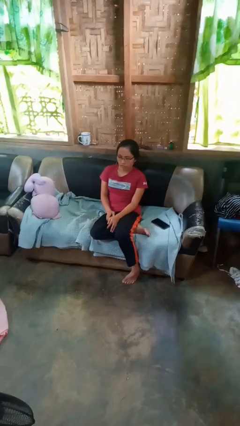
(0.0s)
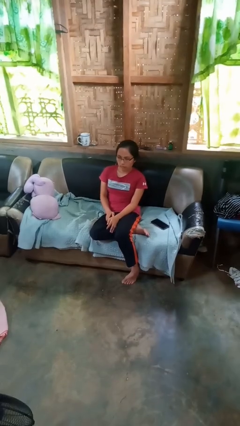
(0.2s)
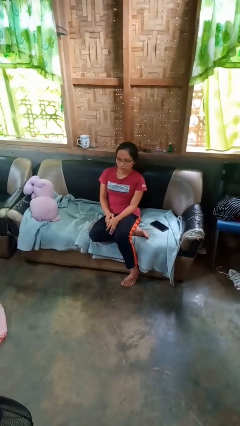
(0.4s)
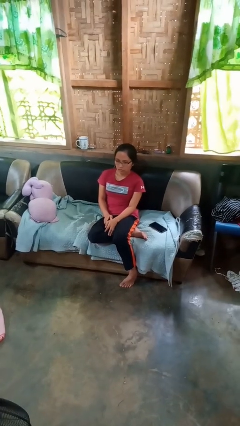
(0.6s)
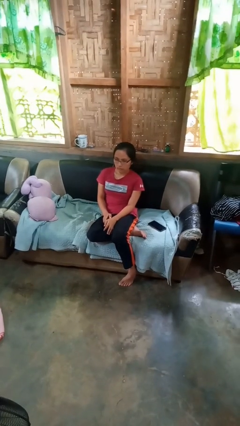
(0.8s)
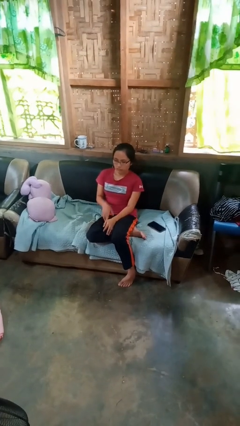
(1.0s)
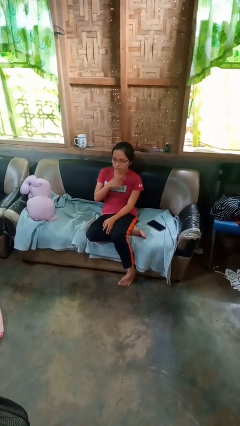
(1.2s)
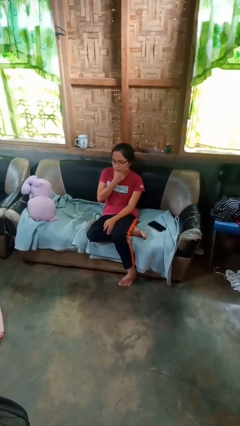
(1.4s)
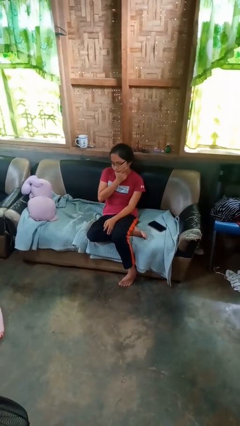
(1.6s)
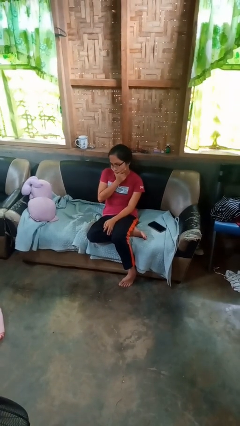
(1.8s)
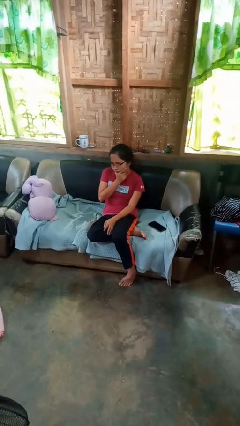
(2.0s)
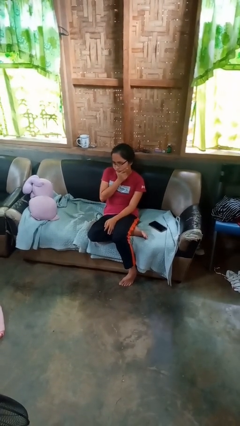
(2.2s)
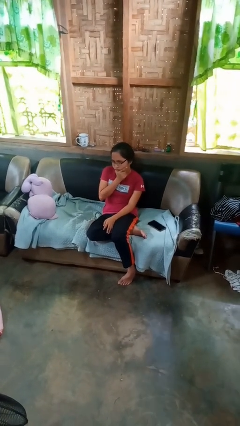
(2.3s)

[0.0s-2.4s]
person strokes chin

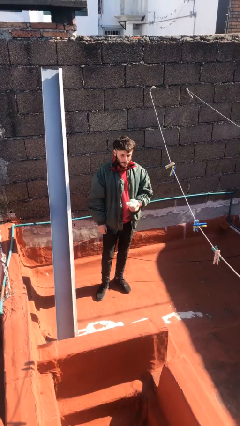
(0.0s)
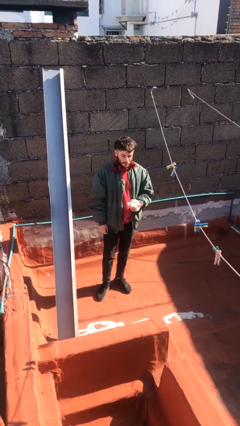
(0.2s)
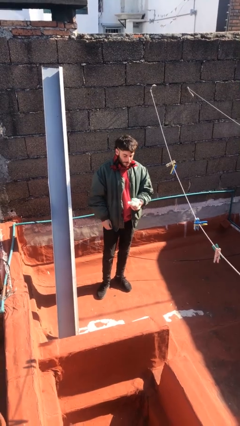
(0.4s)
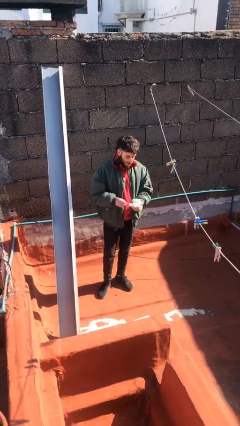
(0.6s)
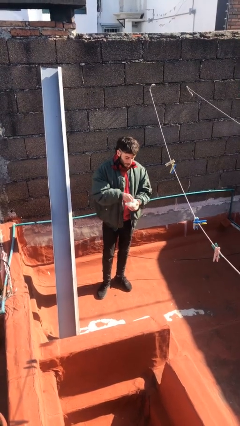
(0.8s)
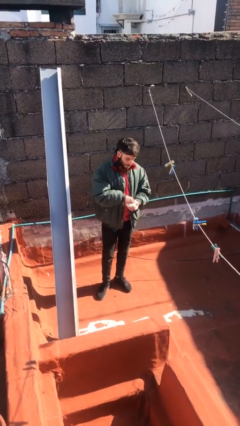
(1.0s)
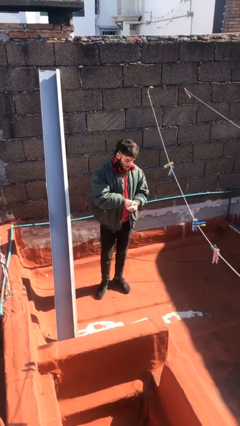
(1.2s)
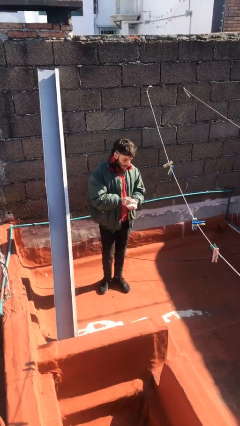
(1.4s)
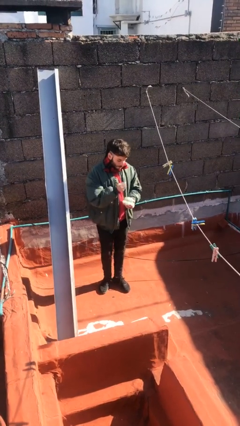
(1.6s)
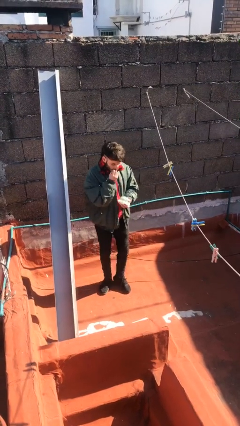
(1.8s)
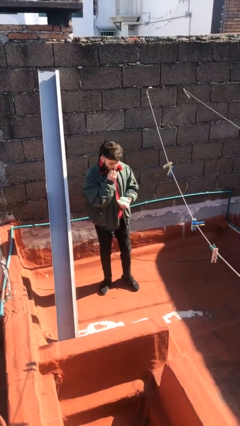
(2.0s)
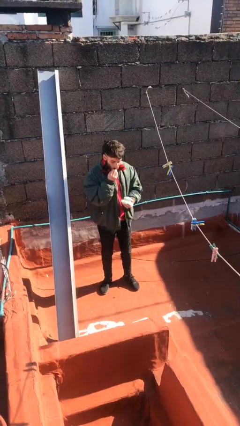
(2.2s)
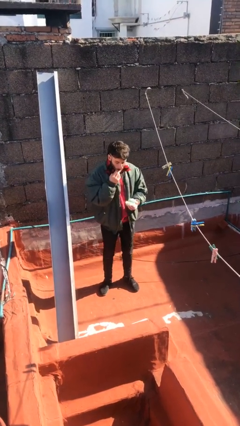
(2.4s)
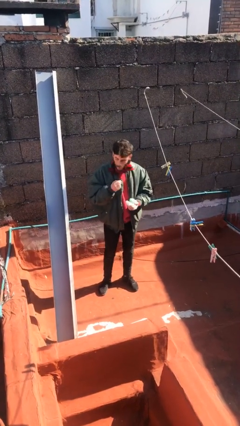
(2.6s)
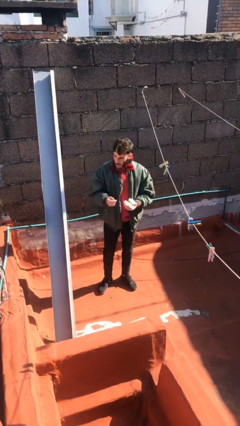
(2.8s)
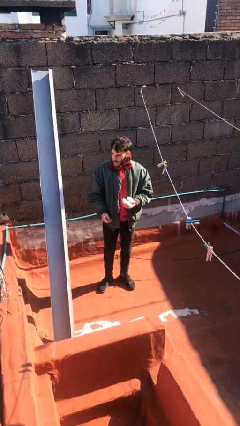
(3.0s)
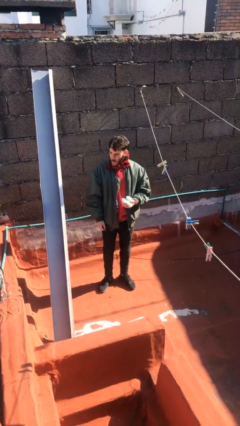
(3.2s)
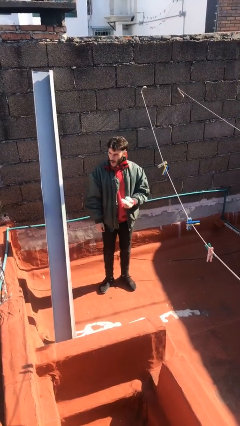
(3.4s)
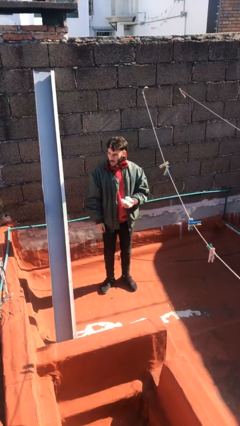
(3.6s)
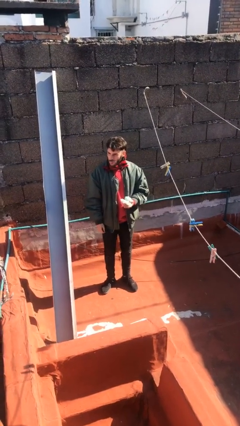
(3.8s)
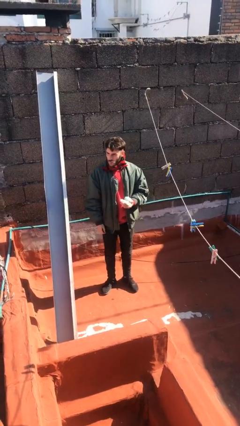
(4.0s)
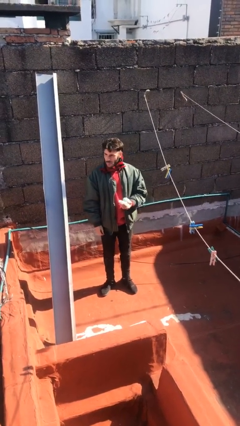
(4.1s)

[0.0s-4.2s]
person eats snack from bag

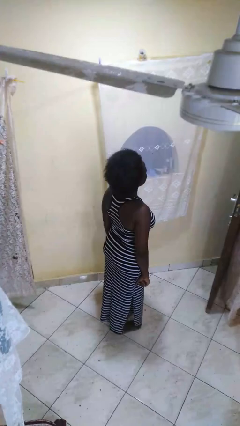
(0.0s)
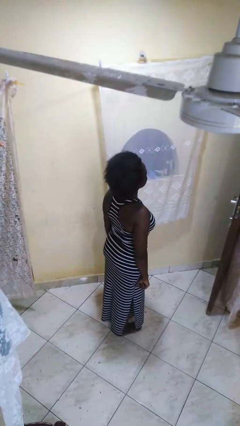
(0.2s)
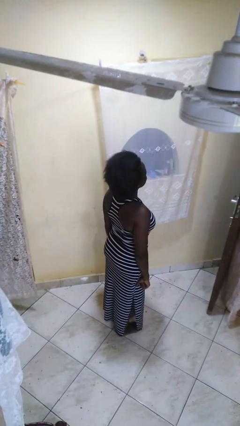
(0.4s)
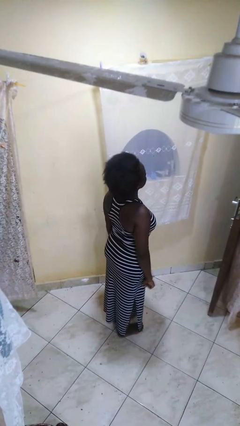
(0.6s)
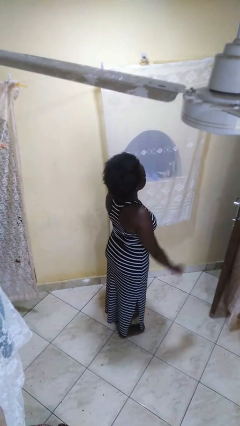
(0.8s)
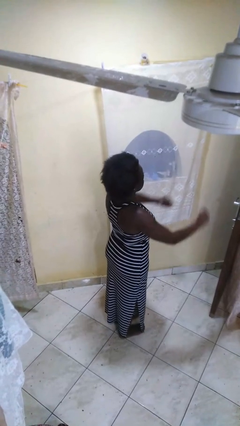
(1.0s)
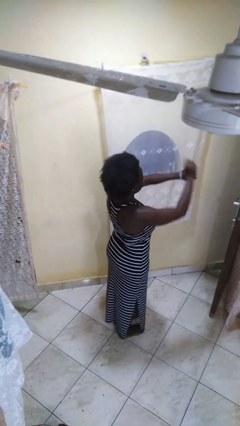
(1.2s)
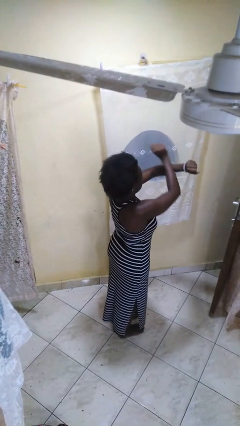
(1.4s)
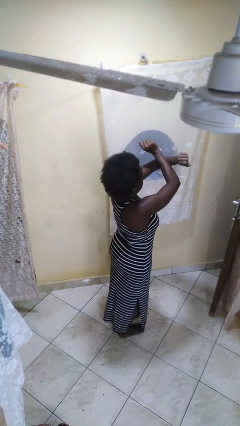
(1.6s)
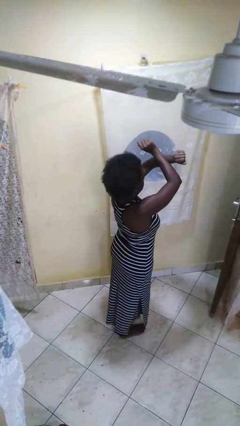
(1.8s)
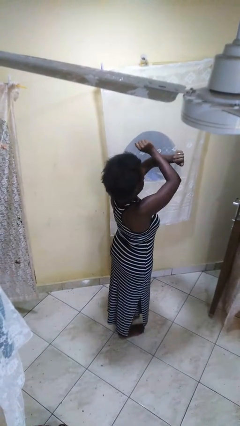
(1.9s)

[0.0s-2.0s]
person gestures arms x

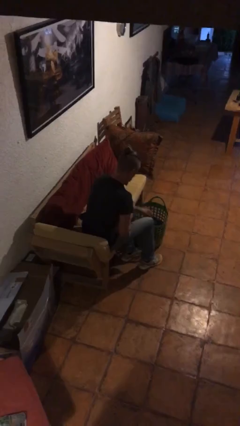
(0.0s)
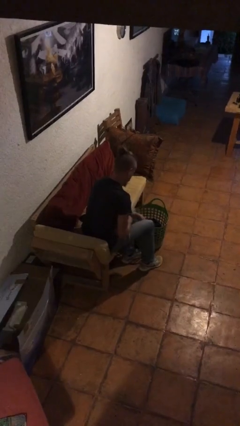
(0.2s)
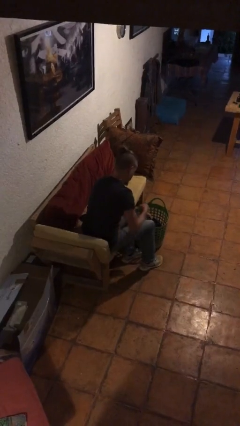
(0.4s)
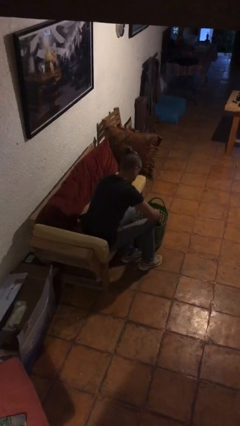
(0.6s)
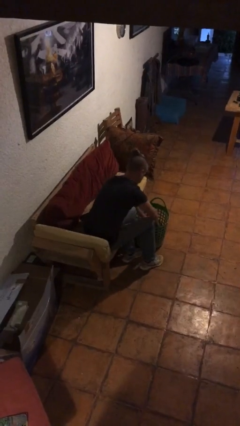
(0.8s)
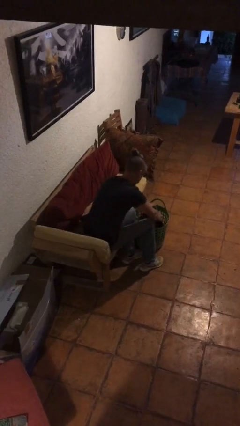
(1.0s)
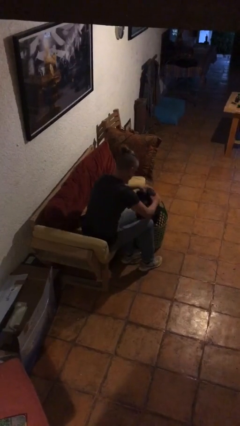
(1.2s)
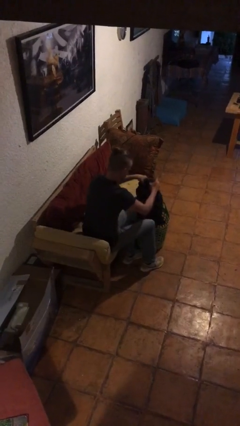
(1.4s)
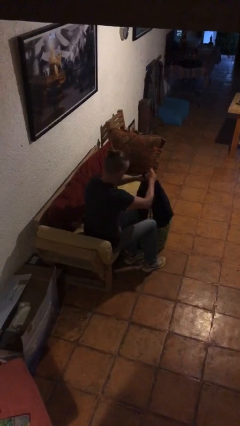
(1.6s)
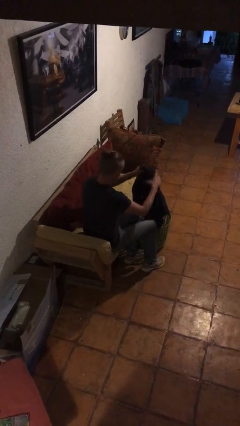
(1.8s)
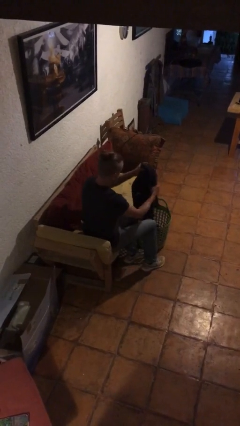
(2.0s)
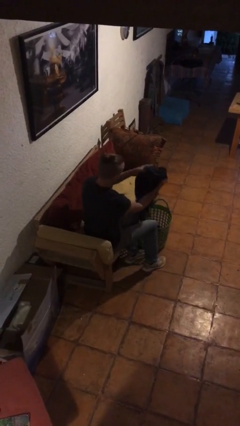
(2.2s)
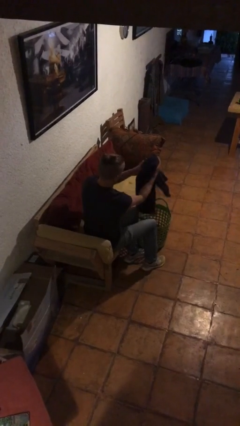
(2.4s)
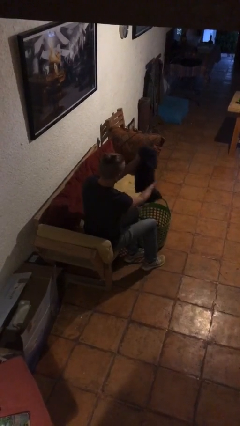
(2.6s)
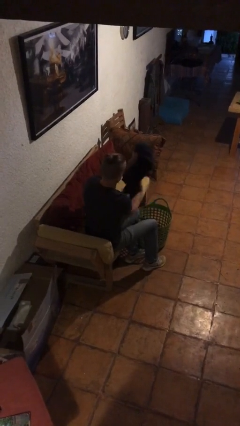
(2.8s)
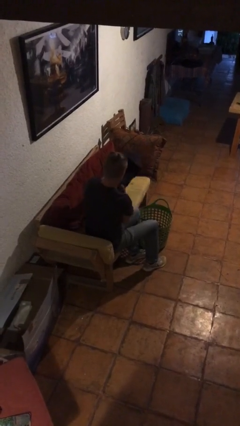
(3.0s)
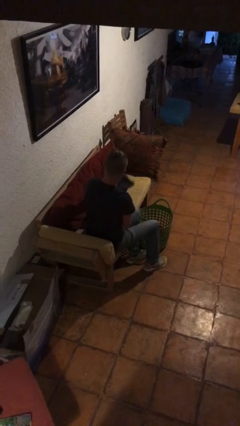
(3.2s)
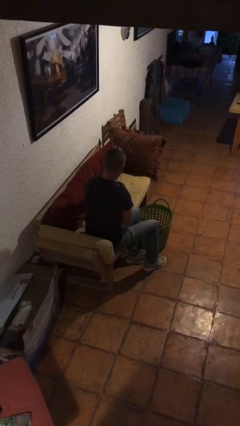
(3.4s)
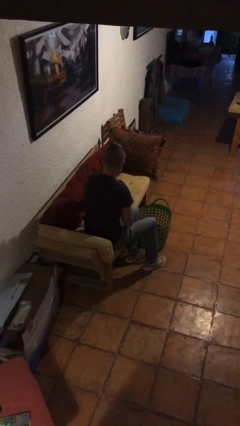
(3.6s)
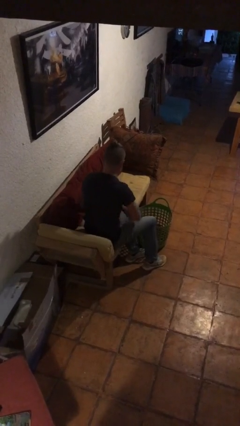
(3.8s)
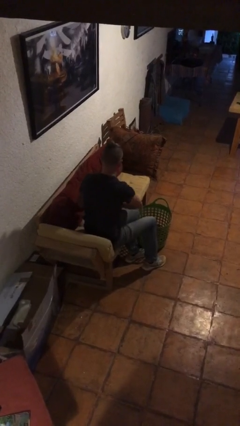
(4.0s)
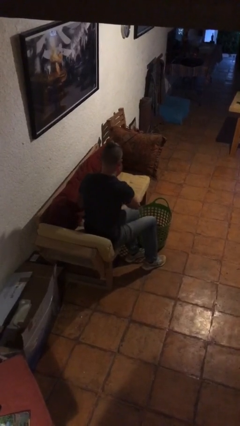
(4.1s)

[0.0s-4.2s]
person folds pants

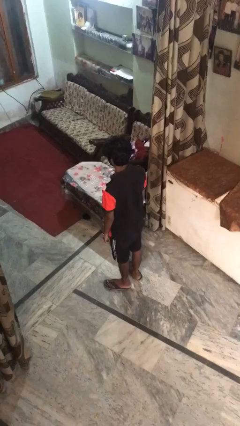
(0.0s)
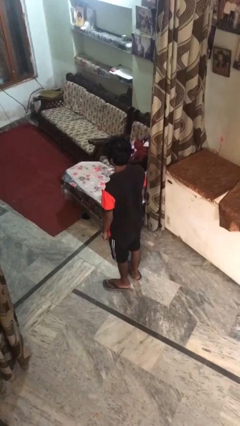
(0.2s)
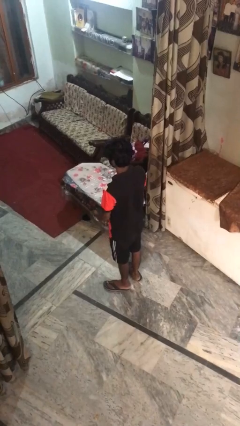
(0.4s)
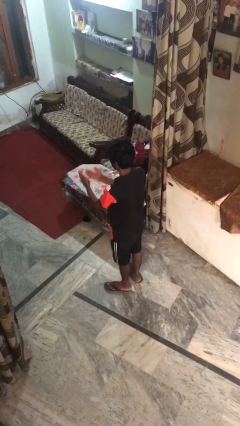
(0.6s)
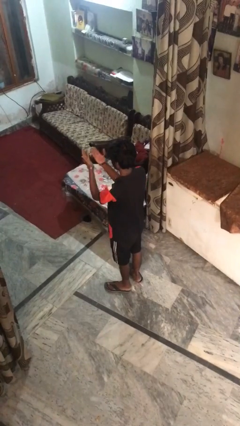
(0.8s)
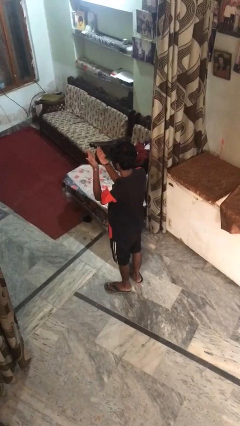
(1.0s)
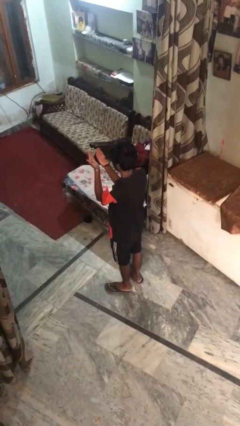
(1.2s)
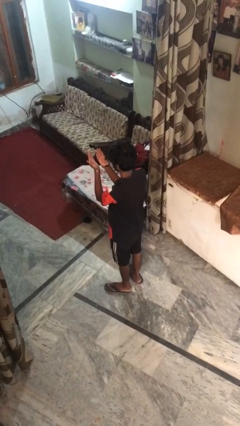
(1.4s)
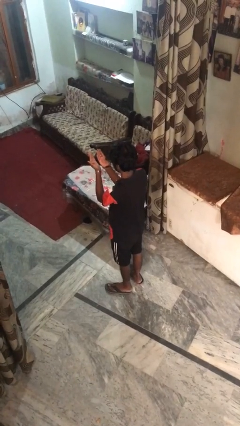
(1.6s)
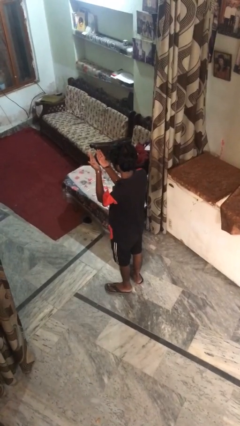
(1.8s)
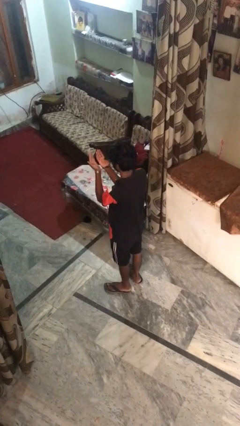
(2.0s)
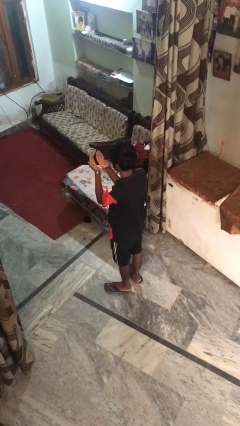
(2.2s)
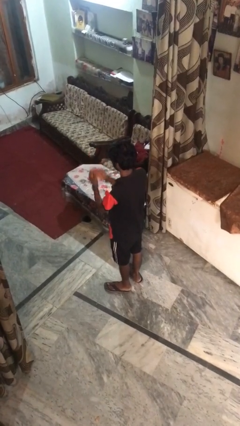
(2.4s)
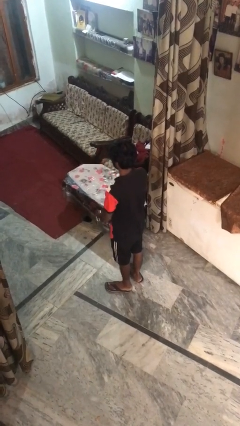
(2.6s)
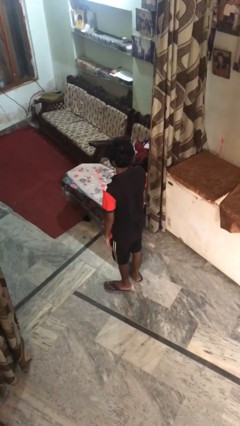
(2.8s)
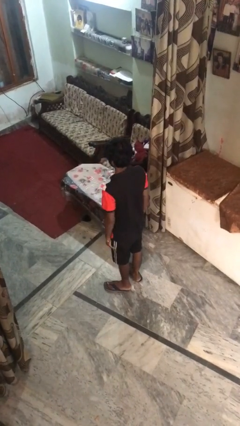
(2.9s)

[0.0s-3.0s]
person prays

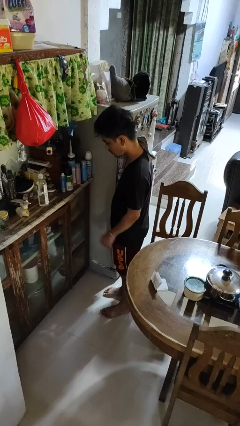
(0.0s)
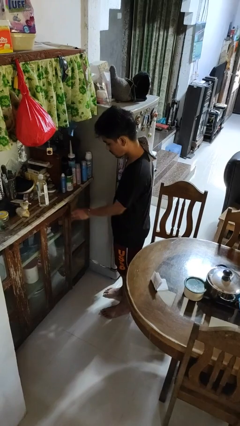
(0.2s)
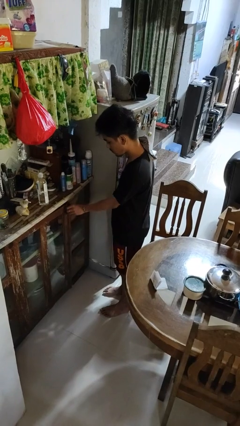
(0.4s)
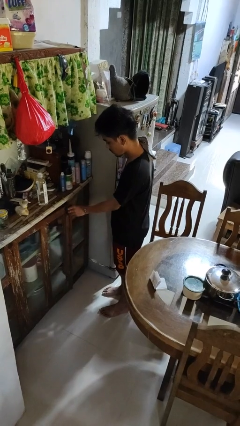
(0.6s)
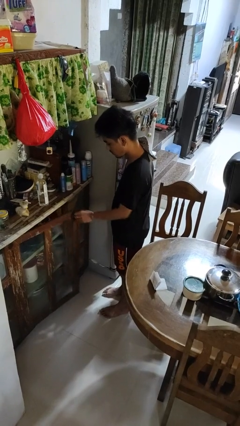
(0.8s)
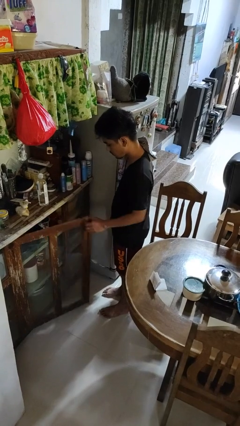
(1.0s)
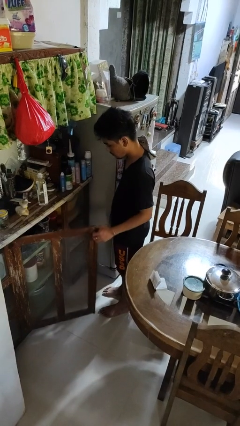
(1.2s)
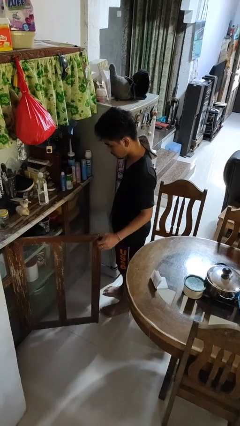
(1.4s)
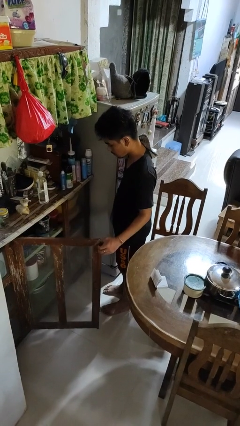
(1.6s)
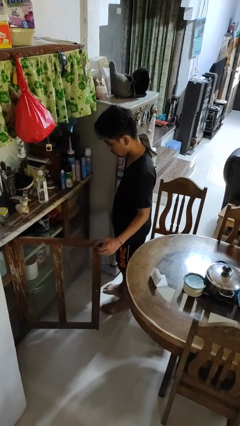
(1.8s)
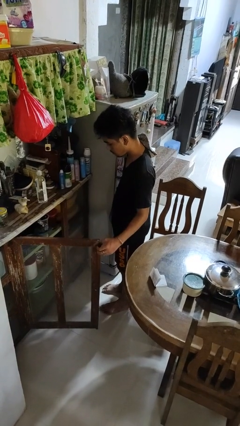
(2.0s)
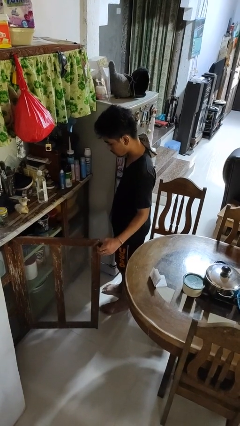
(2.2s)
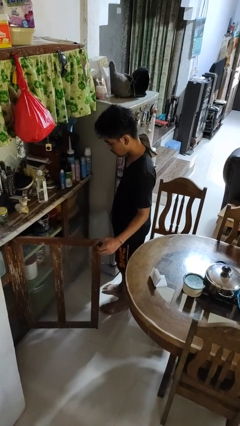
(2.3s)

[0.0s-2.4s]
person opens cabinet
